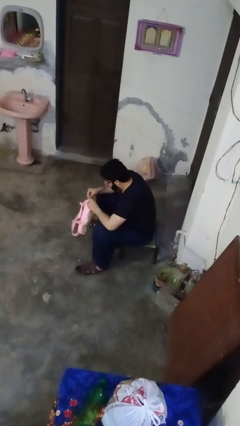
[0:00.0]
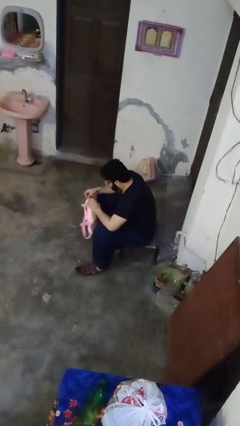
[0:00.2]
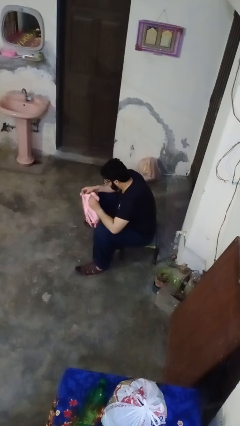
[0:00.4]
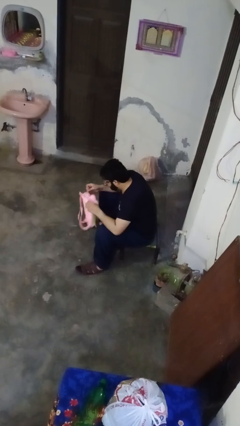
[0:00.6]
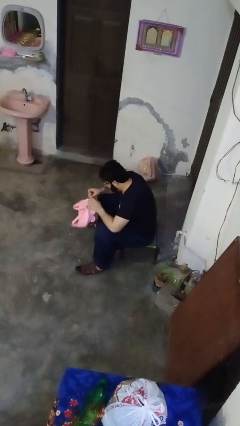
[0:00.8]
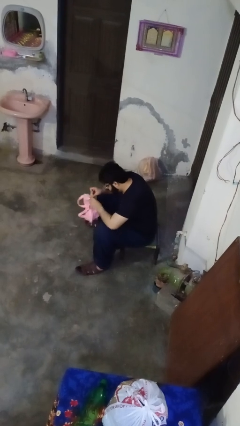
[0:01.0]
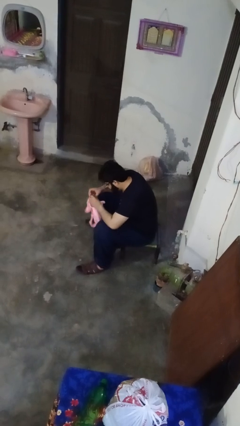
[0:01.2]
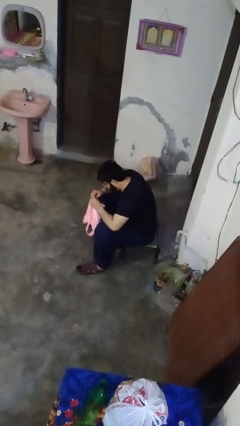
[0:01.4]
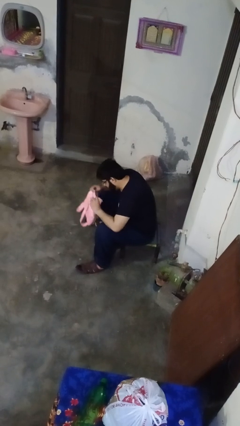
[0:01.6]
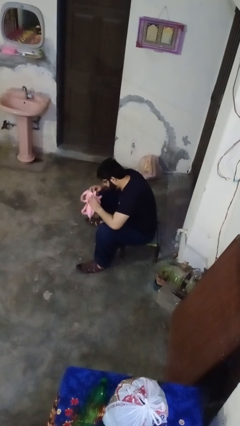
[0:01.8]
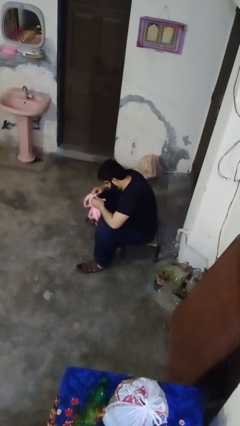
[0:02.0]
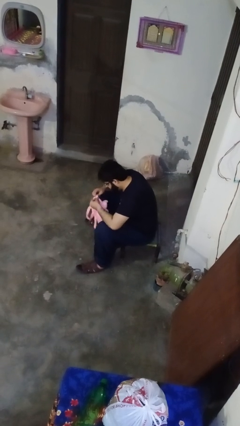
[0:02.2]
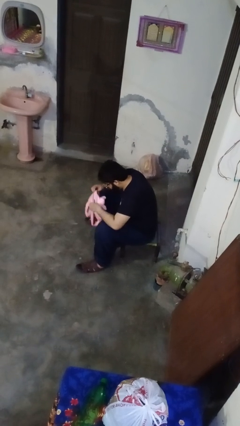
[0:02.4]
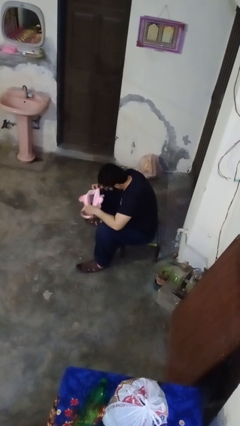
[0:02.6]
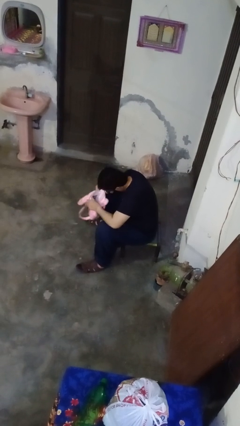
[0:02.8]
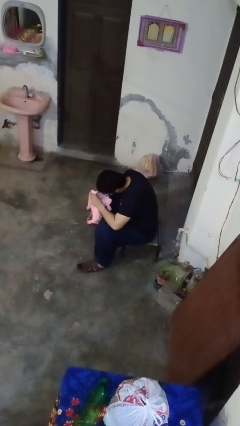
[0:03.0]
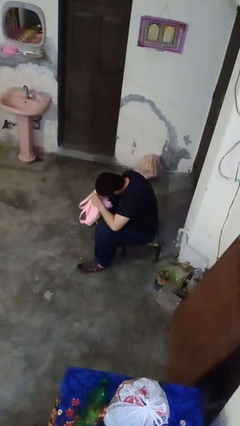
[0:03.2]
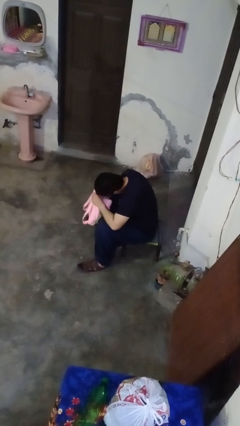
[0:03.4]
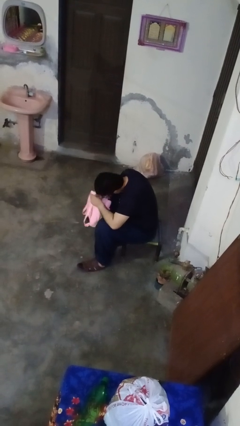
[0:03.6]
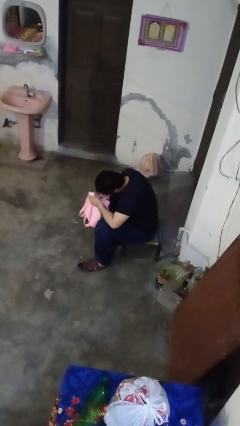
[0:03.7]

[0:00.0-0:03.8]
person searches in bag

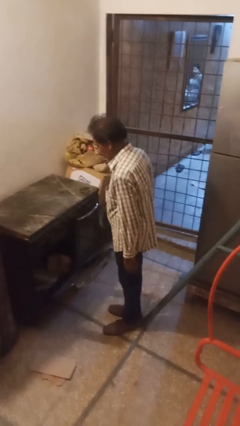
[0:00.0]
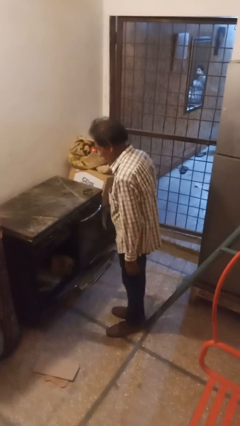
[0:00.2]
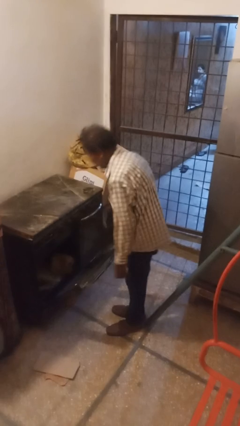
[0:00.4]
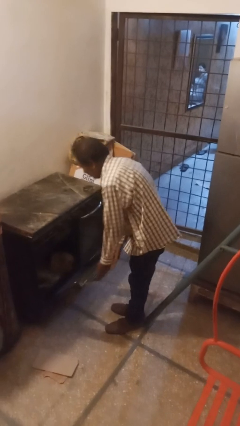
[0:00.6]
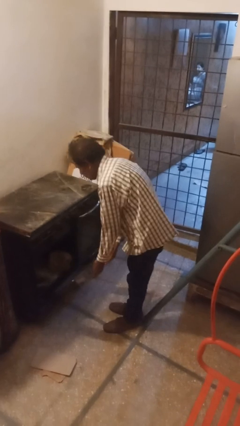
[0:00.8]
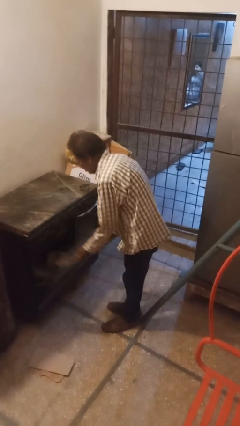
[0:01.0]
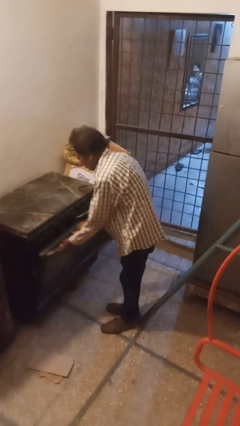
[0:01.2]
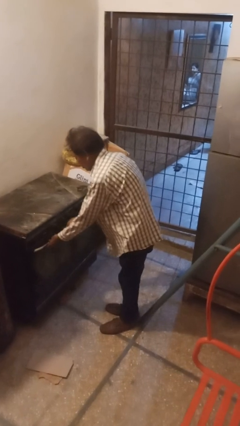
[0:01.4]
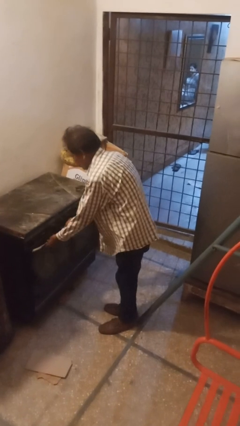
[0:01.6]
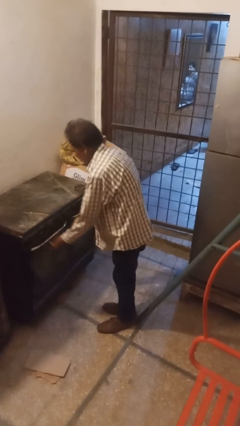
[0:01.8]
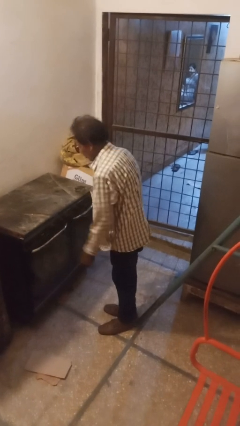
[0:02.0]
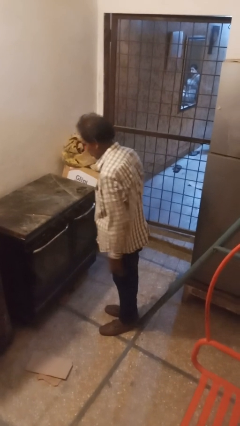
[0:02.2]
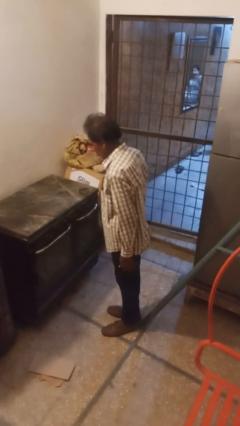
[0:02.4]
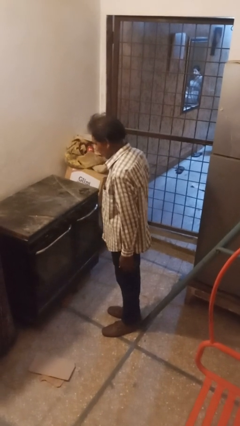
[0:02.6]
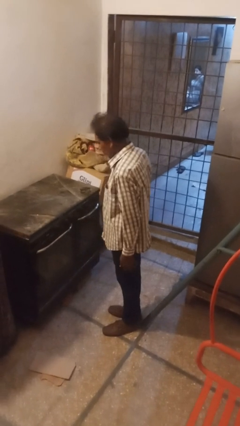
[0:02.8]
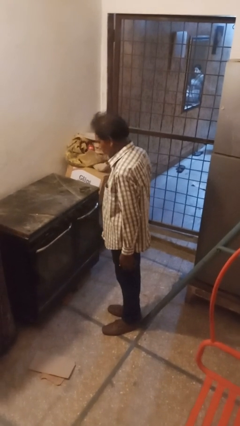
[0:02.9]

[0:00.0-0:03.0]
person closes oven door

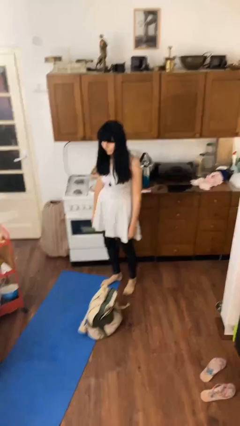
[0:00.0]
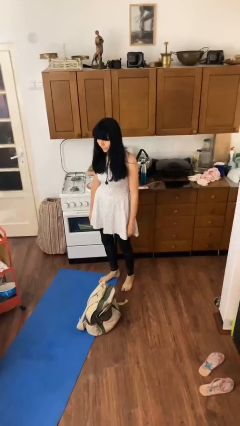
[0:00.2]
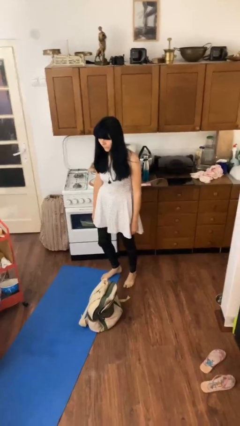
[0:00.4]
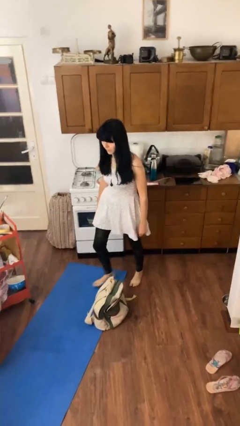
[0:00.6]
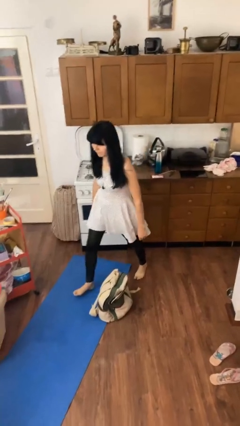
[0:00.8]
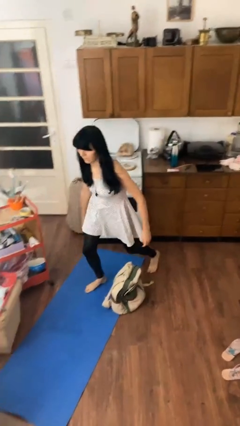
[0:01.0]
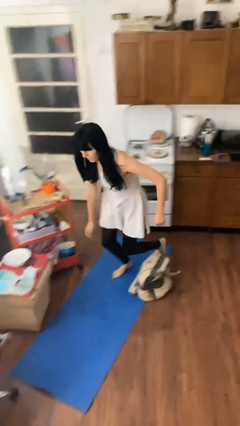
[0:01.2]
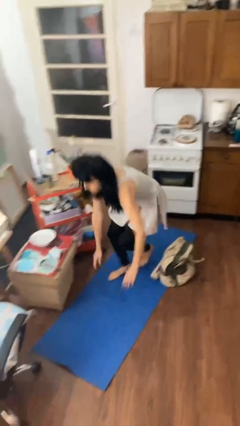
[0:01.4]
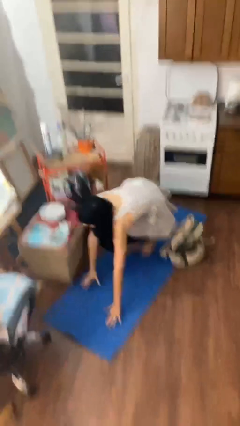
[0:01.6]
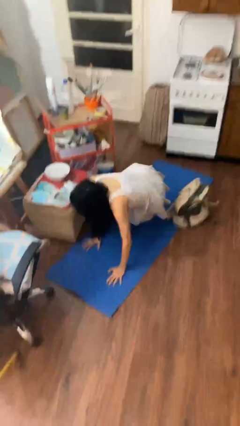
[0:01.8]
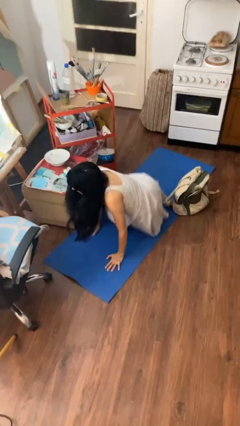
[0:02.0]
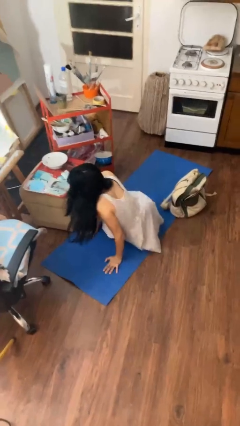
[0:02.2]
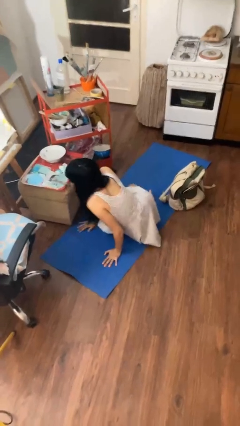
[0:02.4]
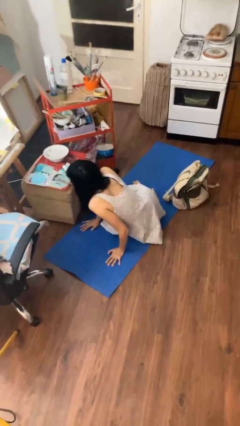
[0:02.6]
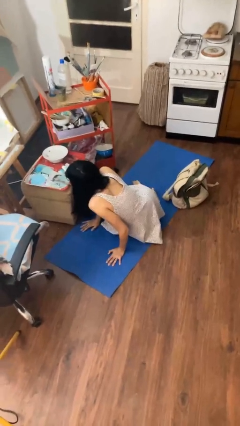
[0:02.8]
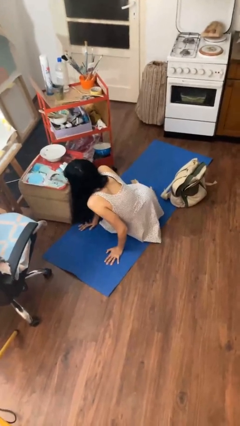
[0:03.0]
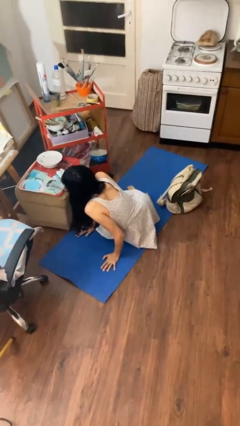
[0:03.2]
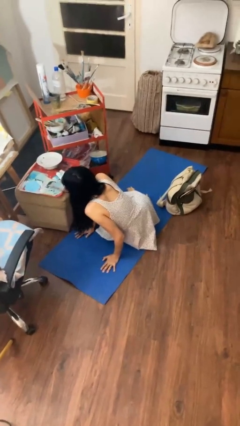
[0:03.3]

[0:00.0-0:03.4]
person trips on object on floor

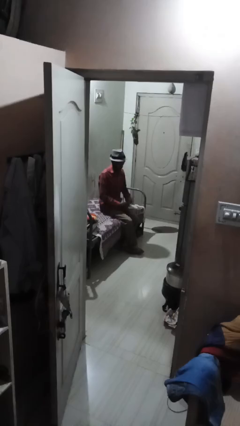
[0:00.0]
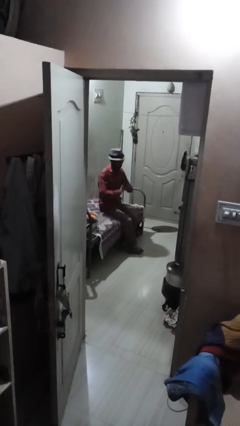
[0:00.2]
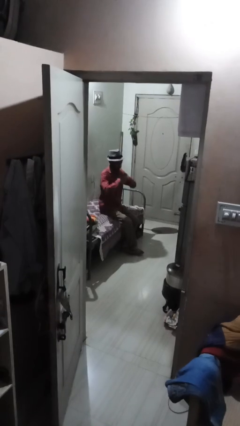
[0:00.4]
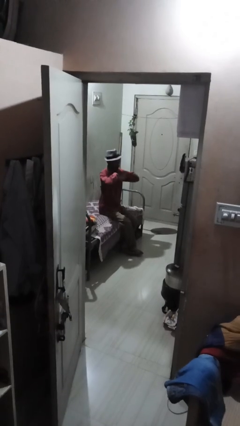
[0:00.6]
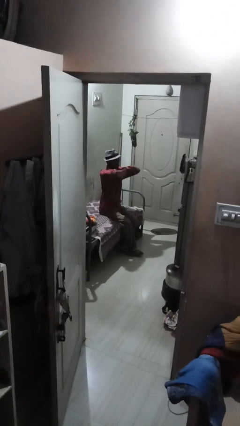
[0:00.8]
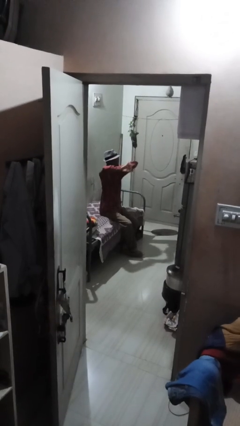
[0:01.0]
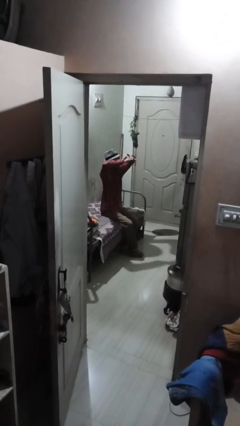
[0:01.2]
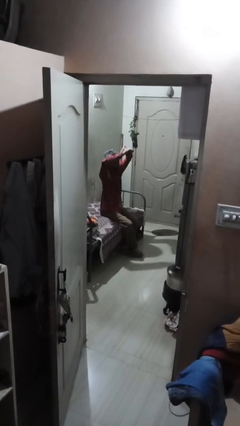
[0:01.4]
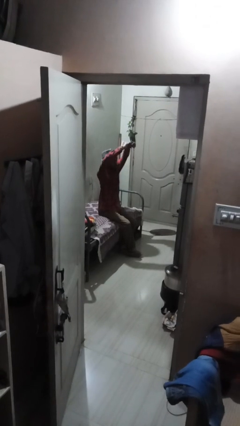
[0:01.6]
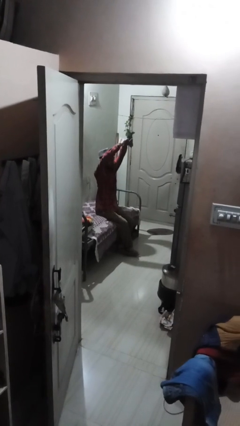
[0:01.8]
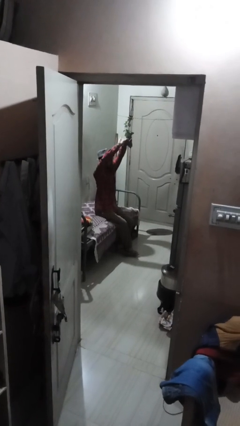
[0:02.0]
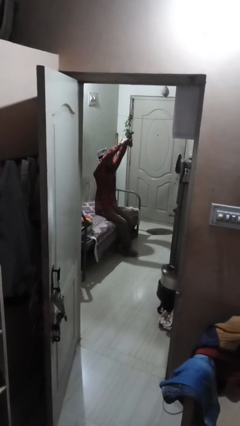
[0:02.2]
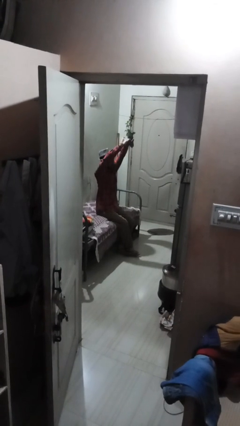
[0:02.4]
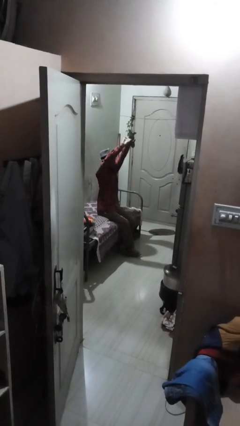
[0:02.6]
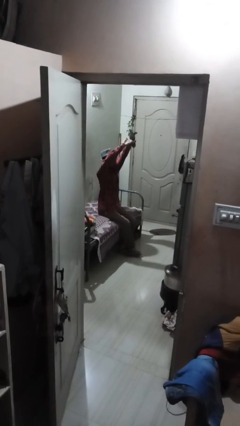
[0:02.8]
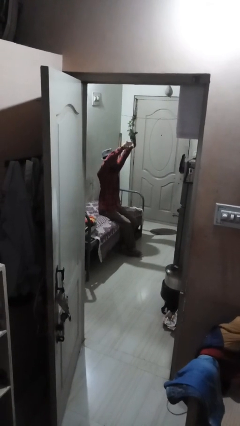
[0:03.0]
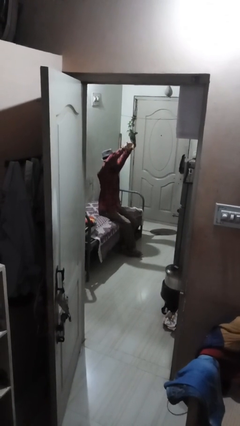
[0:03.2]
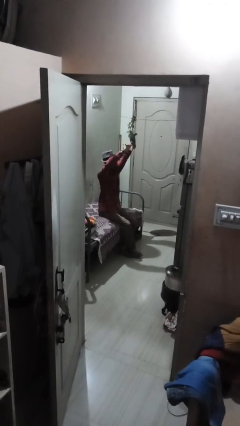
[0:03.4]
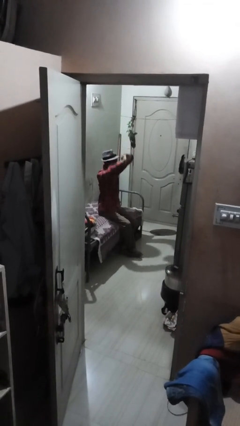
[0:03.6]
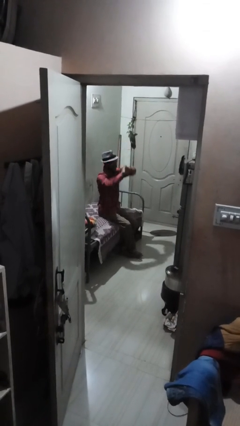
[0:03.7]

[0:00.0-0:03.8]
person cracks knuckles

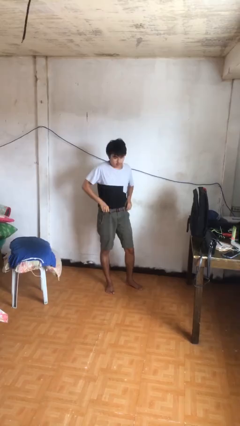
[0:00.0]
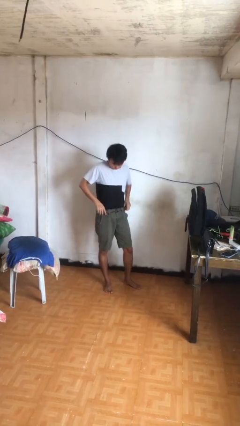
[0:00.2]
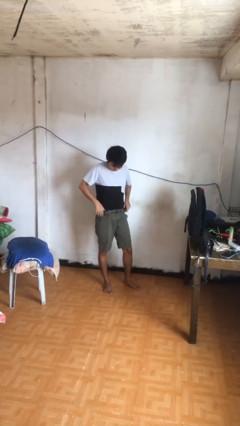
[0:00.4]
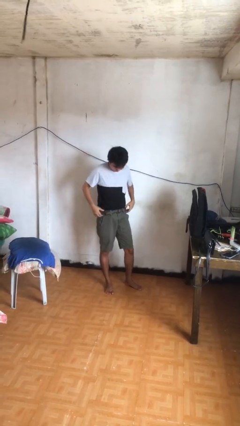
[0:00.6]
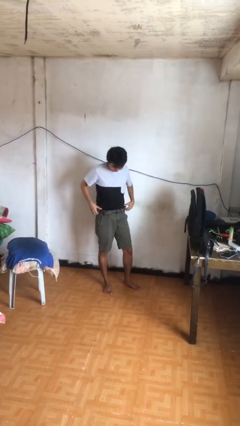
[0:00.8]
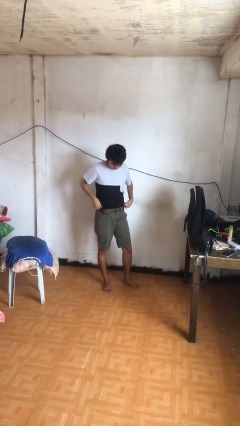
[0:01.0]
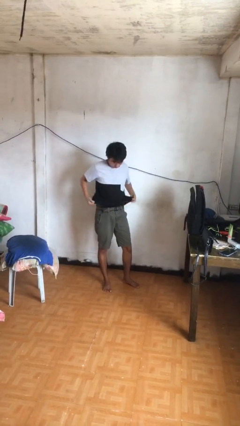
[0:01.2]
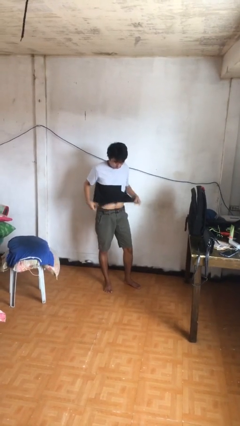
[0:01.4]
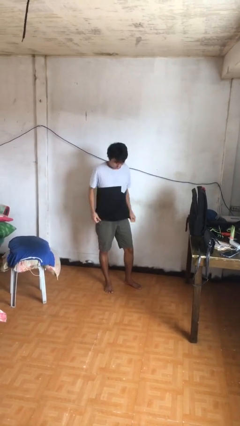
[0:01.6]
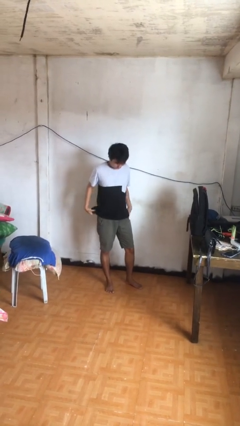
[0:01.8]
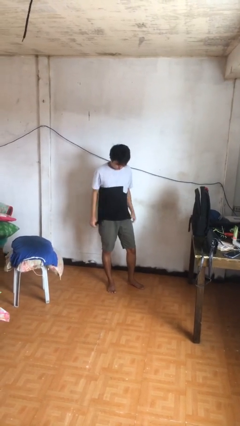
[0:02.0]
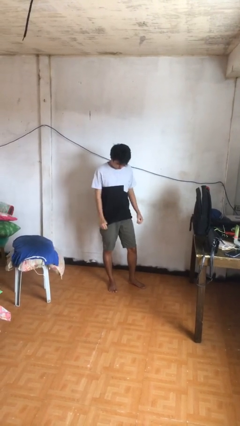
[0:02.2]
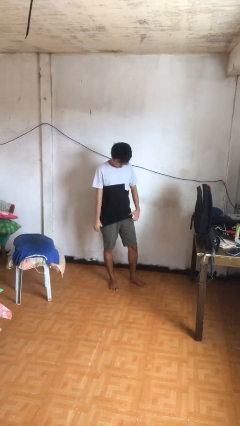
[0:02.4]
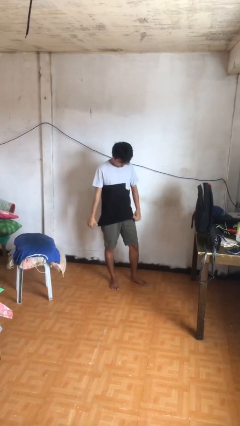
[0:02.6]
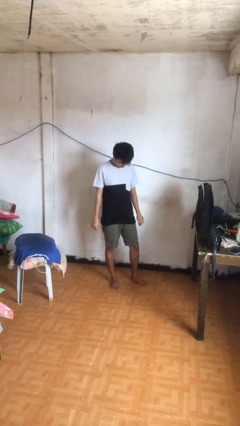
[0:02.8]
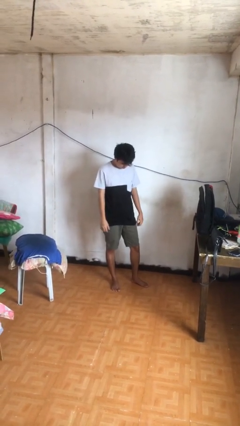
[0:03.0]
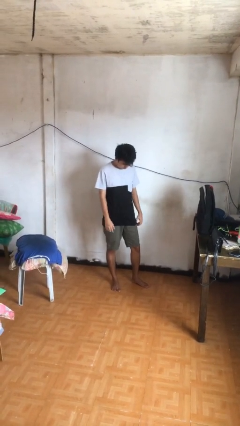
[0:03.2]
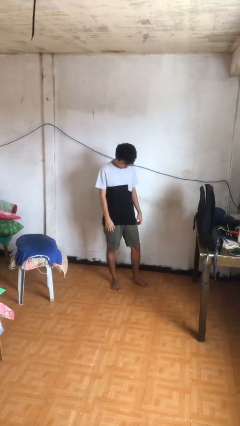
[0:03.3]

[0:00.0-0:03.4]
person untucks shirt

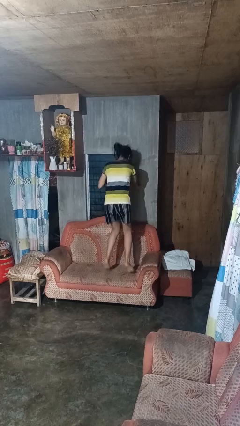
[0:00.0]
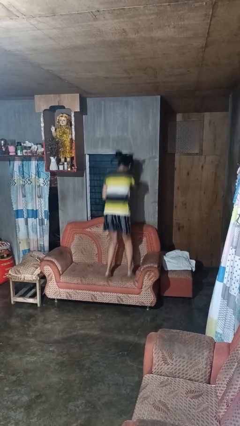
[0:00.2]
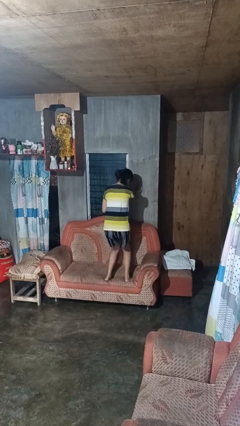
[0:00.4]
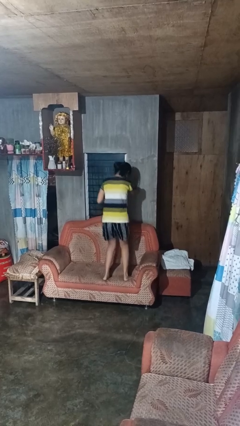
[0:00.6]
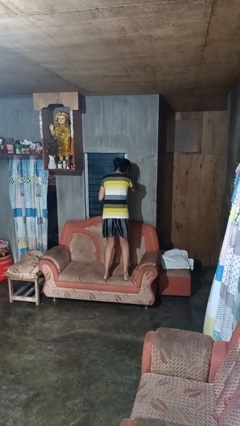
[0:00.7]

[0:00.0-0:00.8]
person jumps on couch
